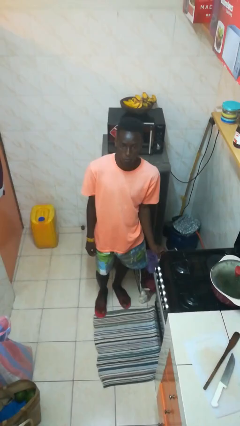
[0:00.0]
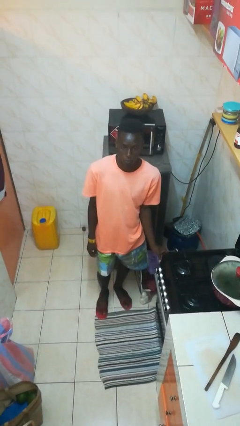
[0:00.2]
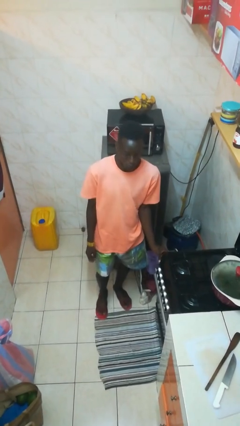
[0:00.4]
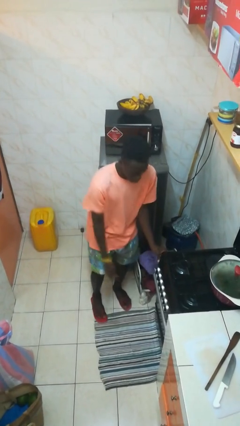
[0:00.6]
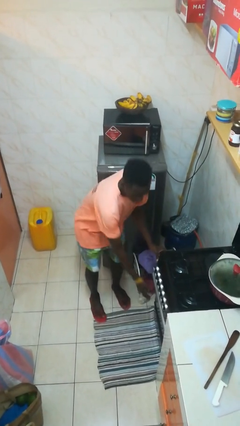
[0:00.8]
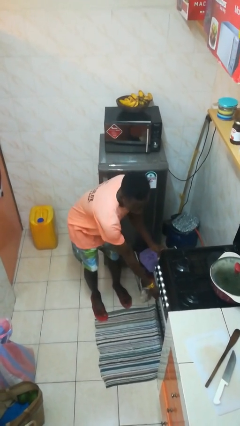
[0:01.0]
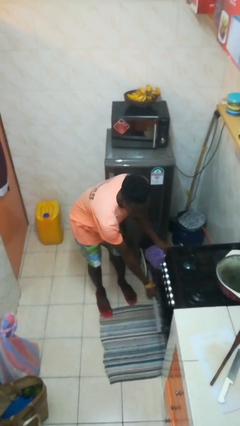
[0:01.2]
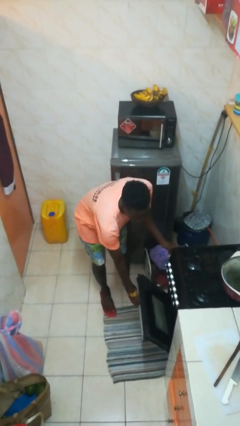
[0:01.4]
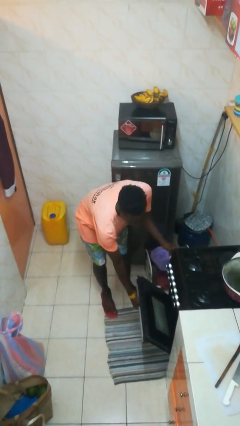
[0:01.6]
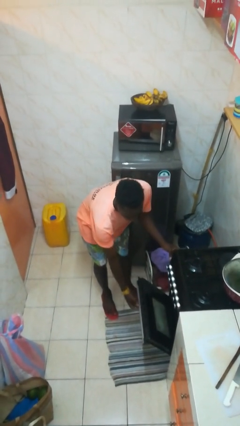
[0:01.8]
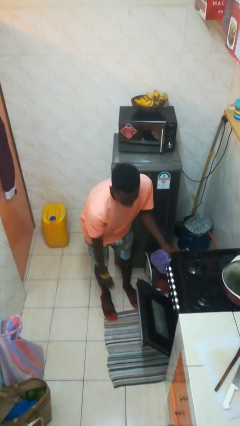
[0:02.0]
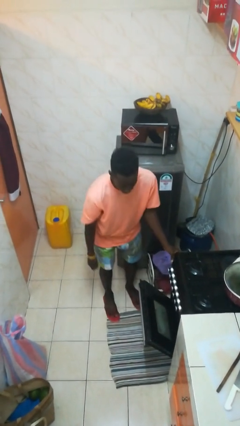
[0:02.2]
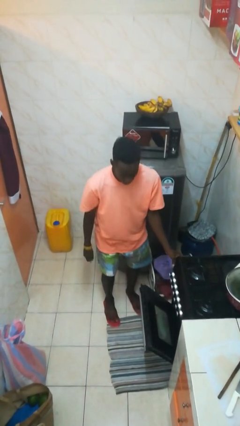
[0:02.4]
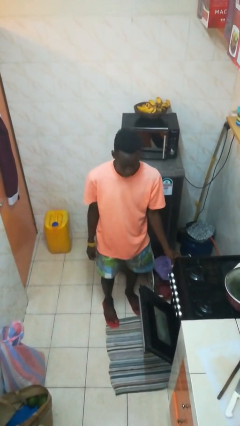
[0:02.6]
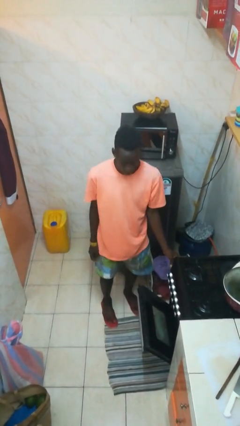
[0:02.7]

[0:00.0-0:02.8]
person opens oven door

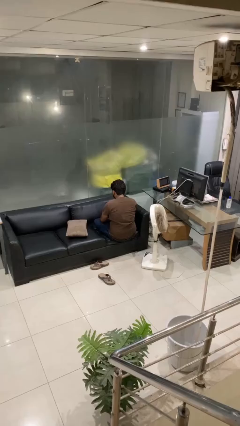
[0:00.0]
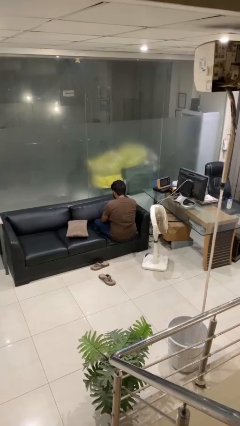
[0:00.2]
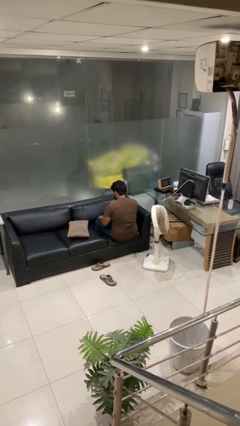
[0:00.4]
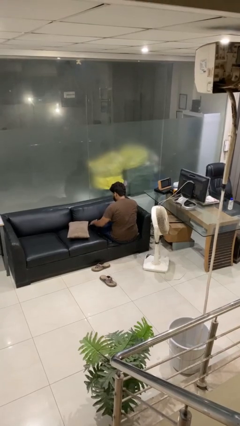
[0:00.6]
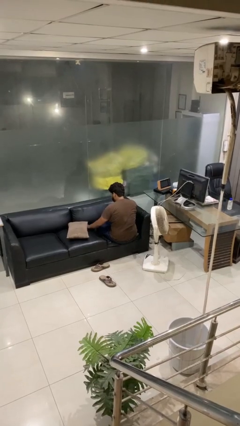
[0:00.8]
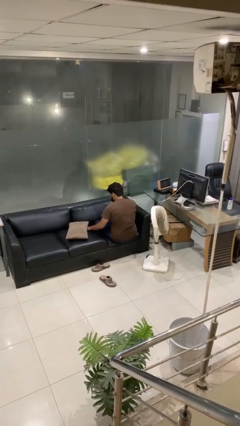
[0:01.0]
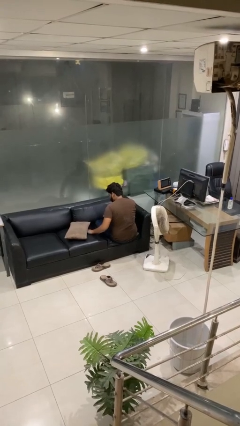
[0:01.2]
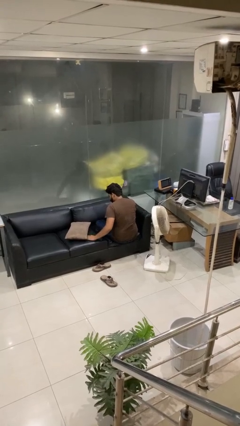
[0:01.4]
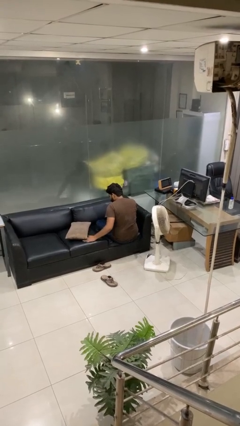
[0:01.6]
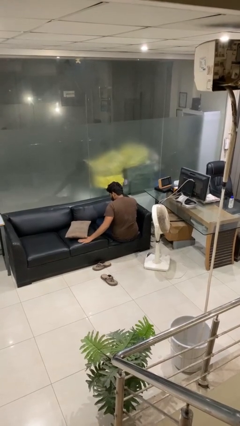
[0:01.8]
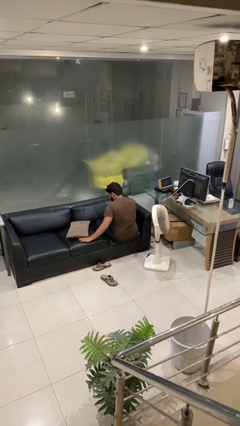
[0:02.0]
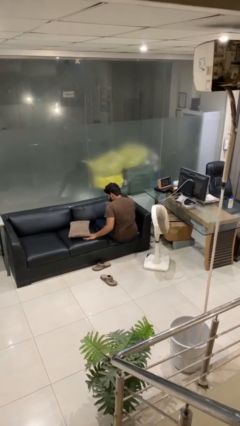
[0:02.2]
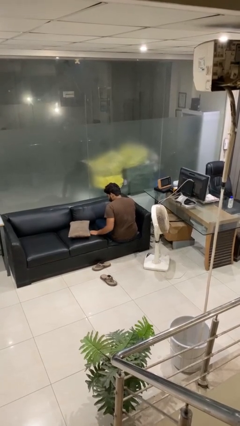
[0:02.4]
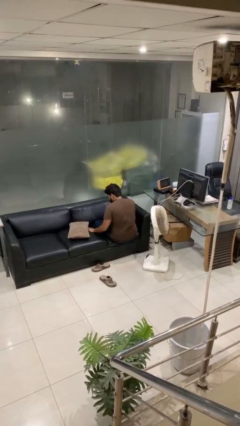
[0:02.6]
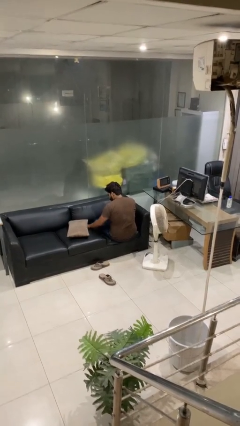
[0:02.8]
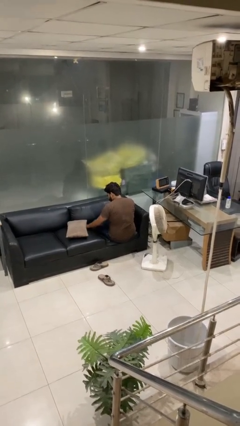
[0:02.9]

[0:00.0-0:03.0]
person searches in couch

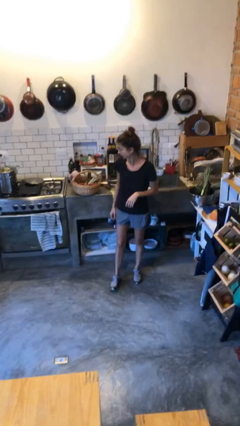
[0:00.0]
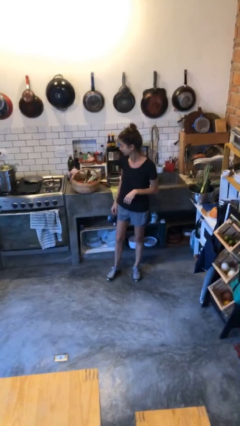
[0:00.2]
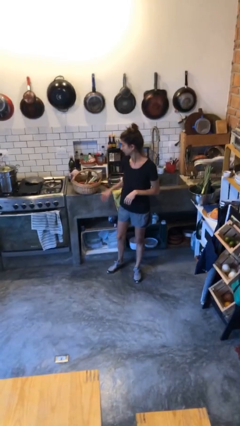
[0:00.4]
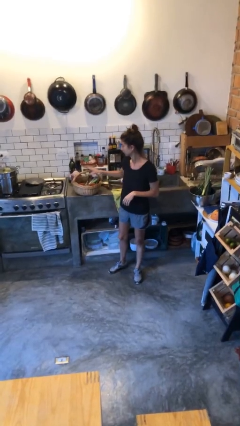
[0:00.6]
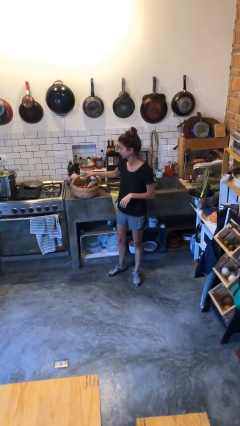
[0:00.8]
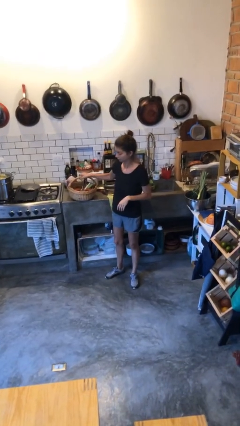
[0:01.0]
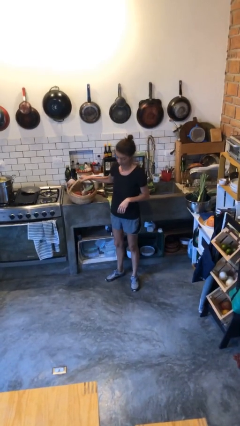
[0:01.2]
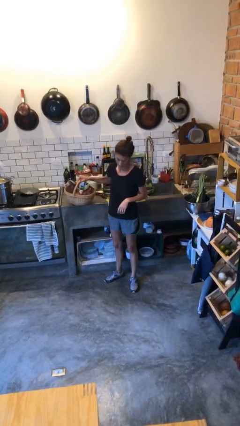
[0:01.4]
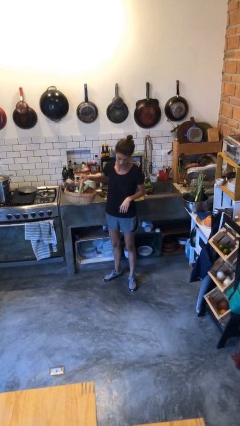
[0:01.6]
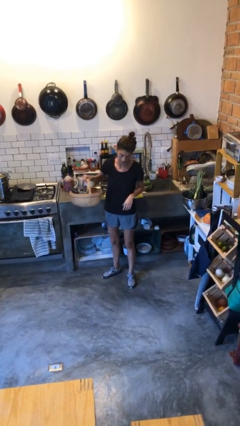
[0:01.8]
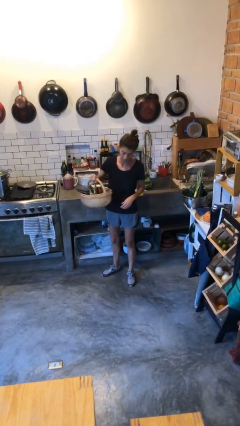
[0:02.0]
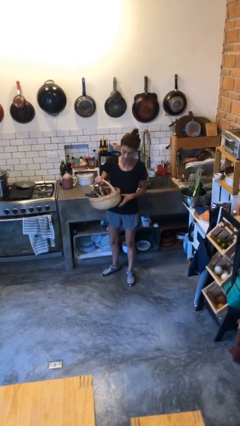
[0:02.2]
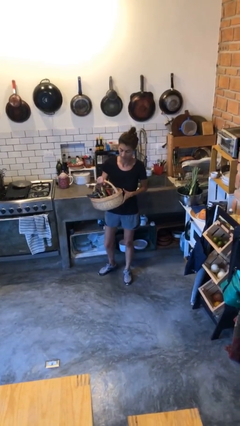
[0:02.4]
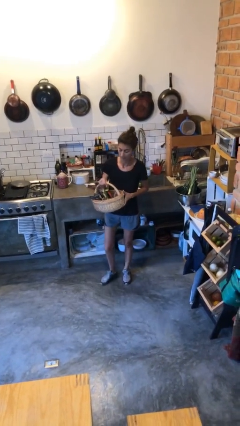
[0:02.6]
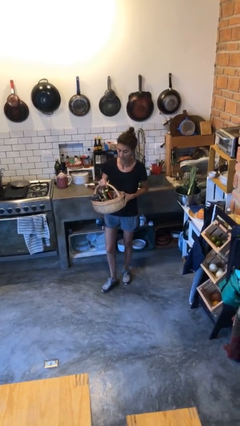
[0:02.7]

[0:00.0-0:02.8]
person picks up object from countertop

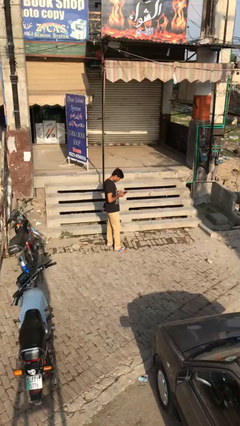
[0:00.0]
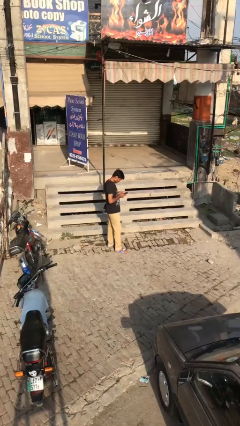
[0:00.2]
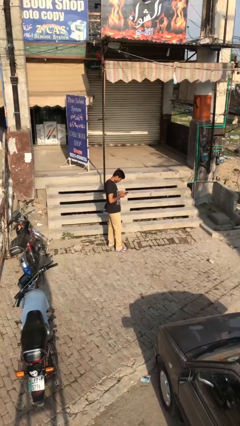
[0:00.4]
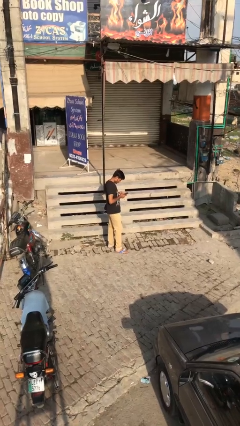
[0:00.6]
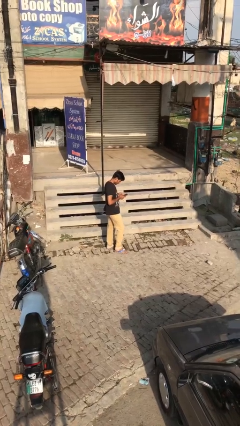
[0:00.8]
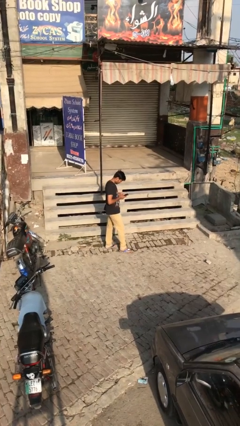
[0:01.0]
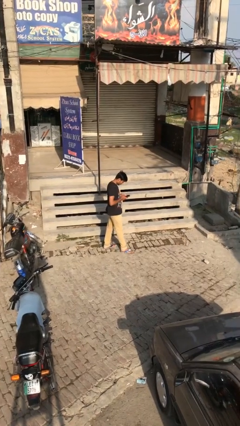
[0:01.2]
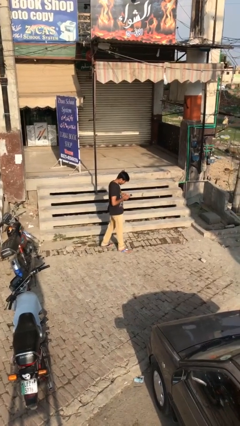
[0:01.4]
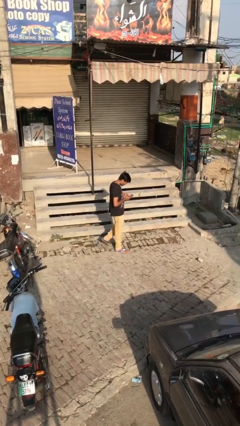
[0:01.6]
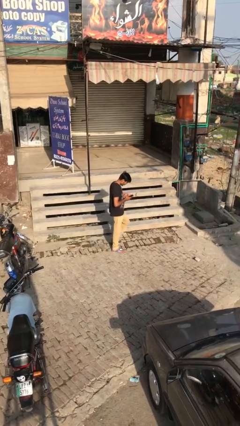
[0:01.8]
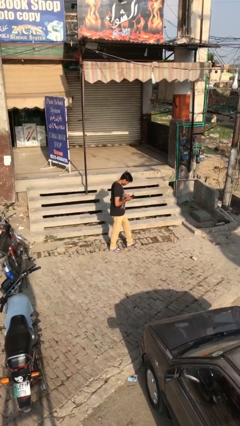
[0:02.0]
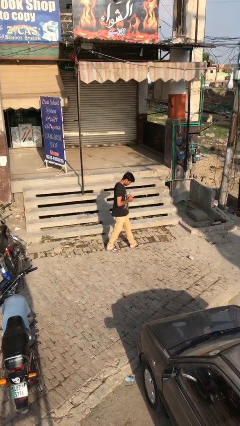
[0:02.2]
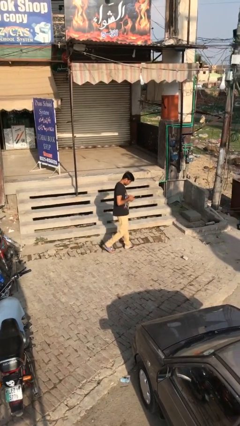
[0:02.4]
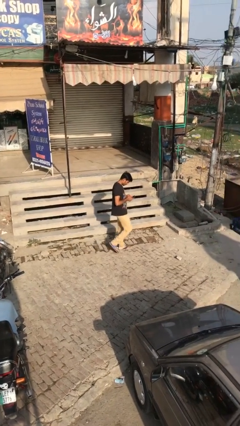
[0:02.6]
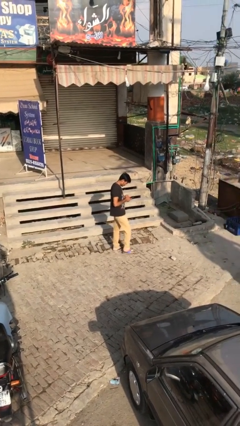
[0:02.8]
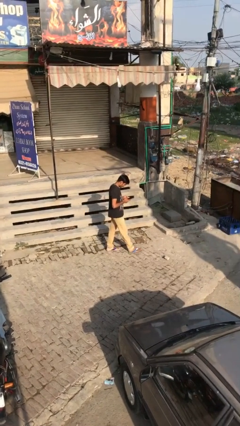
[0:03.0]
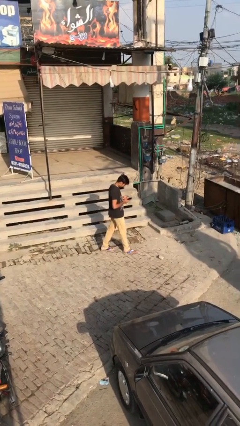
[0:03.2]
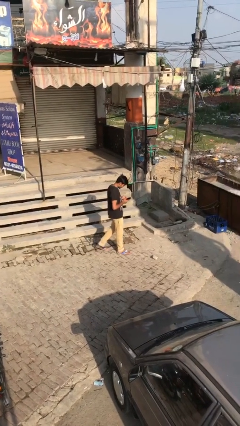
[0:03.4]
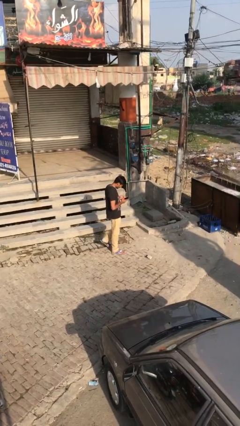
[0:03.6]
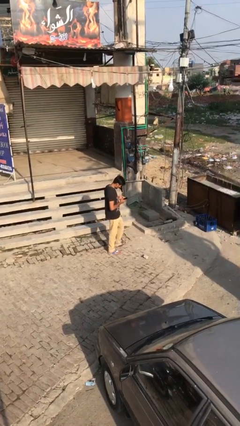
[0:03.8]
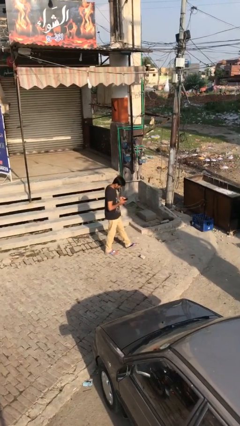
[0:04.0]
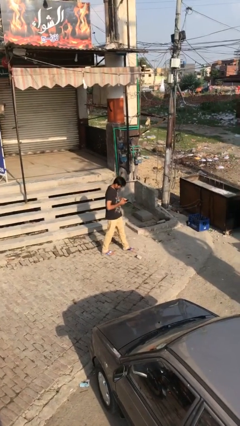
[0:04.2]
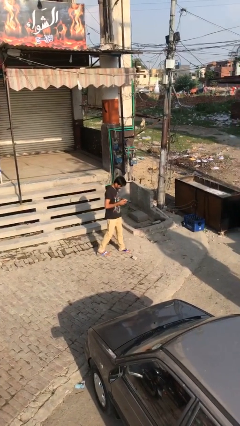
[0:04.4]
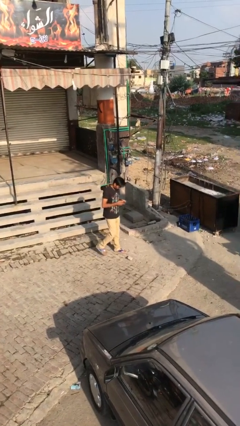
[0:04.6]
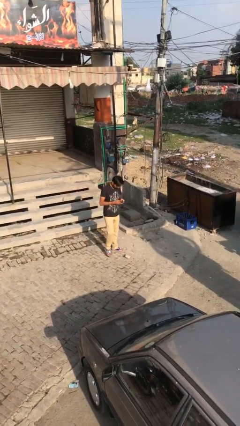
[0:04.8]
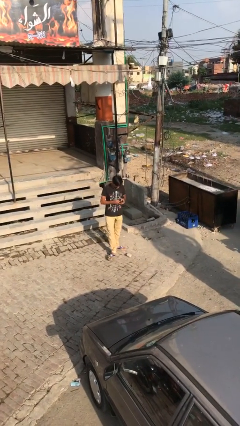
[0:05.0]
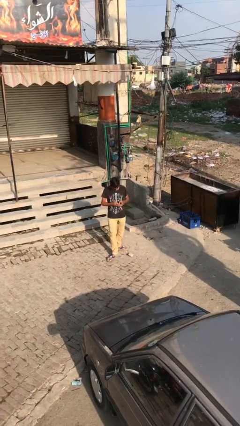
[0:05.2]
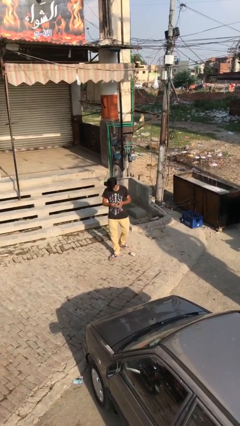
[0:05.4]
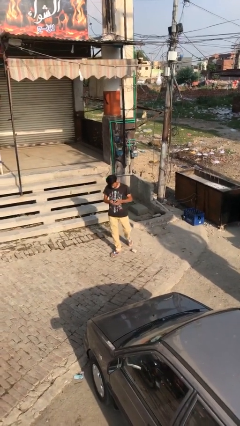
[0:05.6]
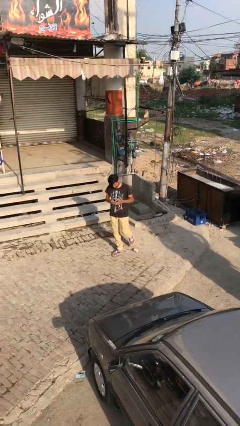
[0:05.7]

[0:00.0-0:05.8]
person texts on phone

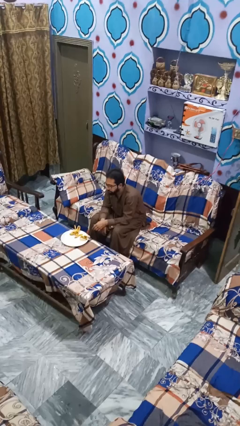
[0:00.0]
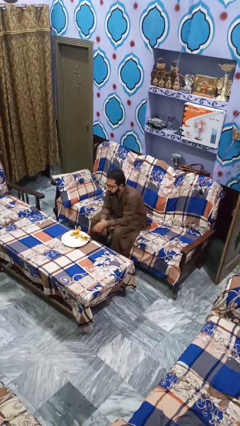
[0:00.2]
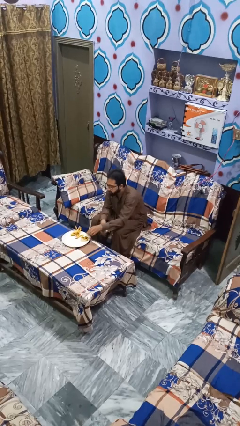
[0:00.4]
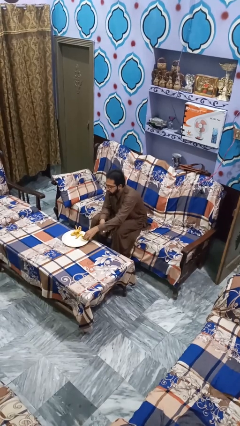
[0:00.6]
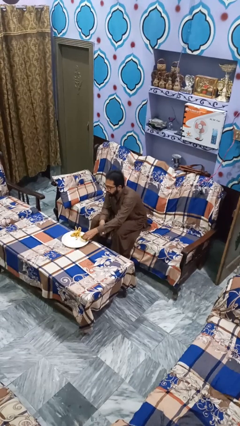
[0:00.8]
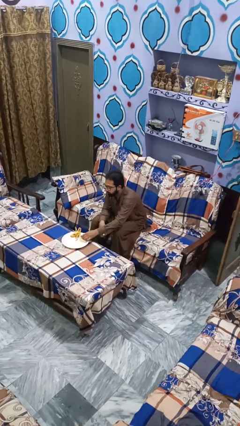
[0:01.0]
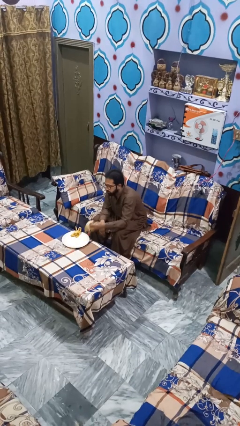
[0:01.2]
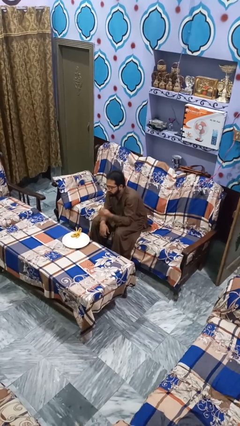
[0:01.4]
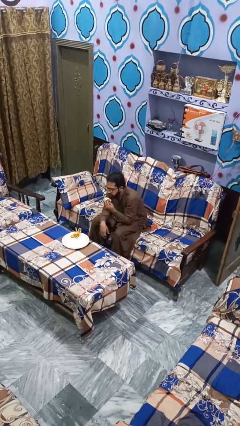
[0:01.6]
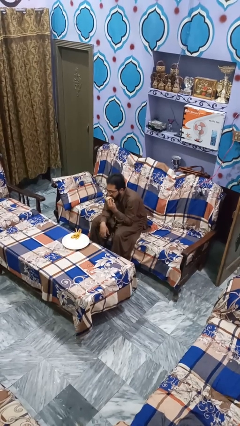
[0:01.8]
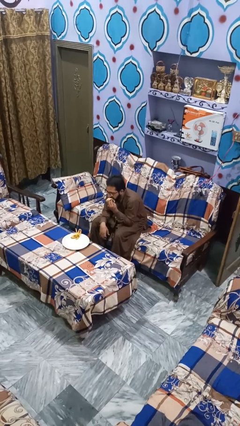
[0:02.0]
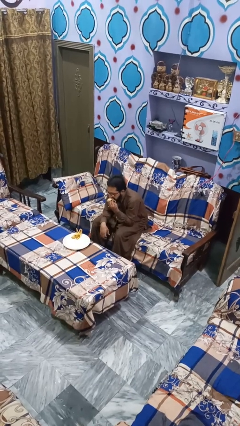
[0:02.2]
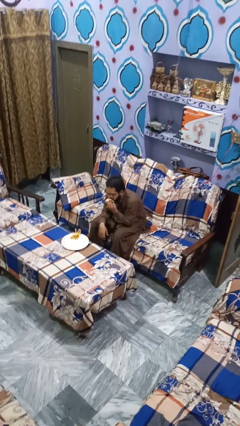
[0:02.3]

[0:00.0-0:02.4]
person eats banana

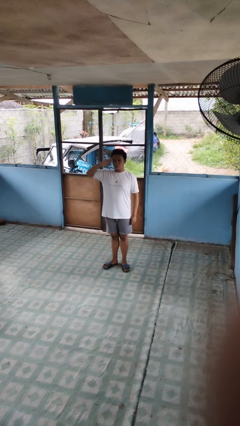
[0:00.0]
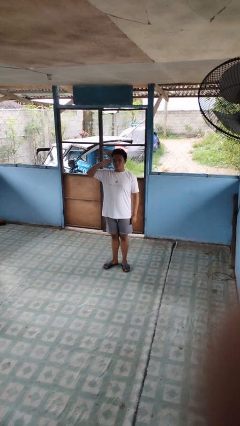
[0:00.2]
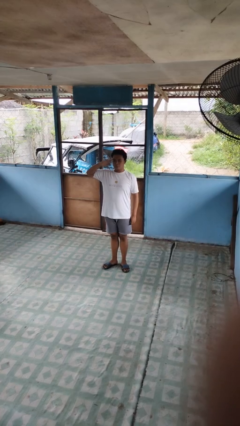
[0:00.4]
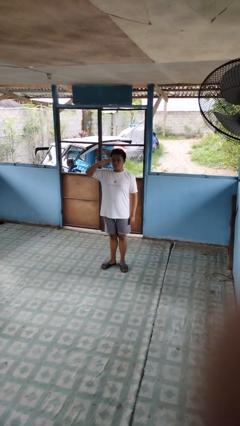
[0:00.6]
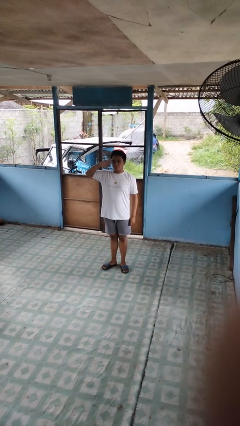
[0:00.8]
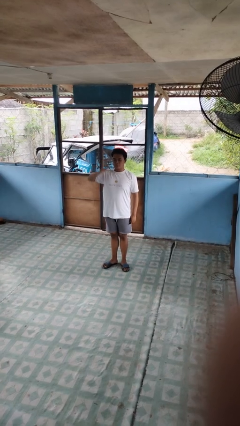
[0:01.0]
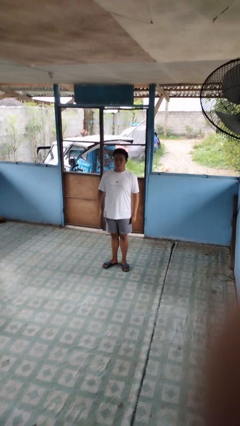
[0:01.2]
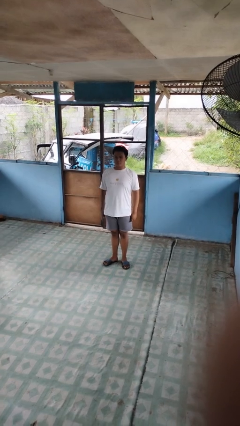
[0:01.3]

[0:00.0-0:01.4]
person salutes
